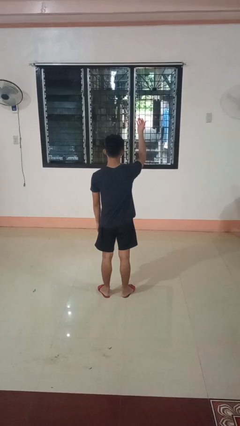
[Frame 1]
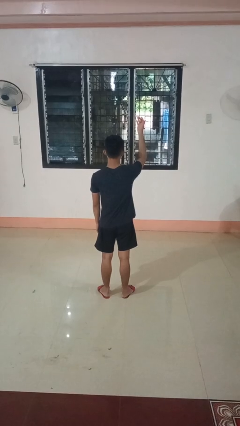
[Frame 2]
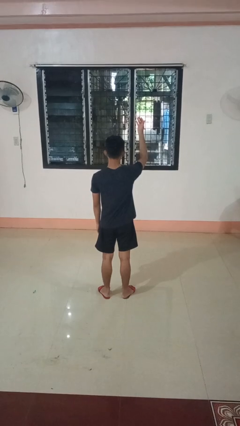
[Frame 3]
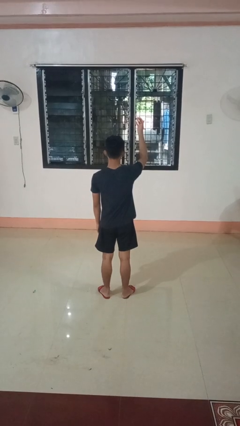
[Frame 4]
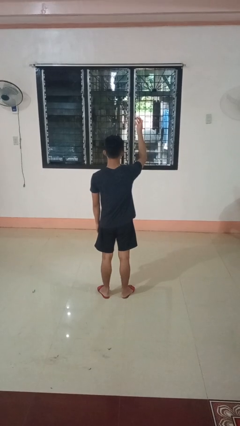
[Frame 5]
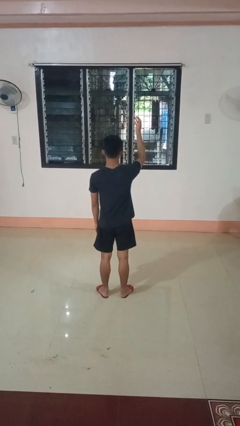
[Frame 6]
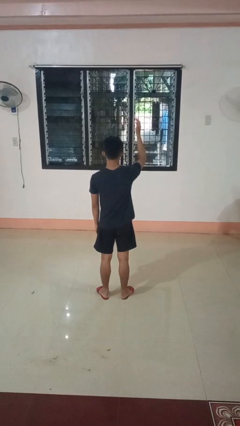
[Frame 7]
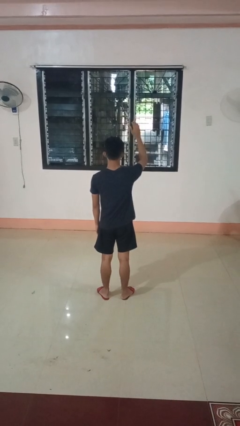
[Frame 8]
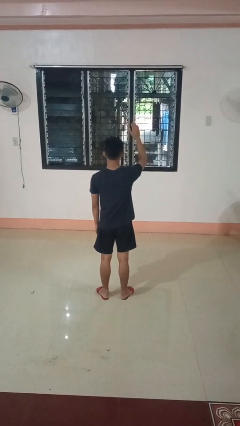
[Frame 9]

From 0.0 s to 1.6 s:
person gestures swipe up

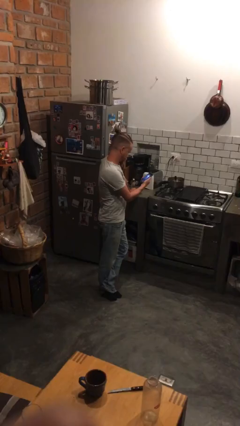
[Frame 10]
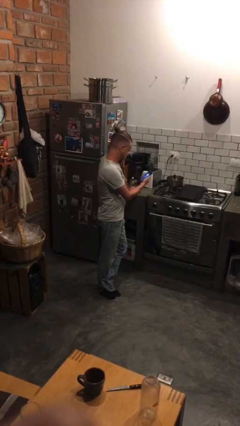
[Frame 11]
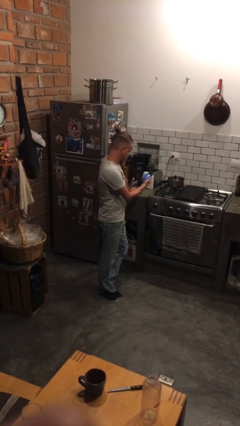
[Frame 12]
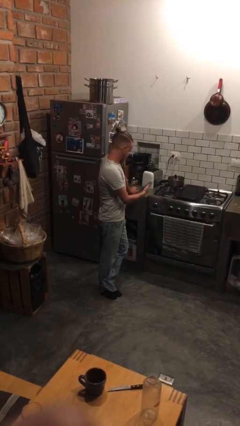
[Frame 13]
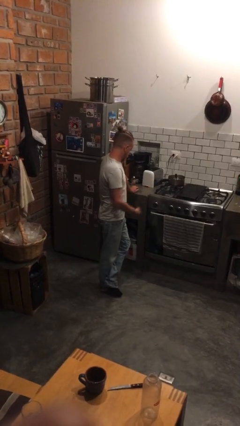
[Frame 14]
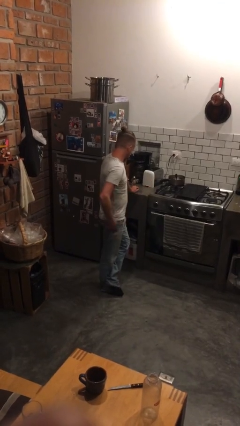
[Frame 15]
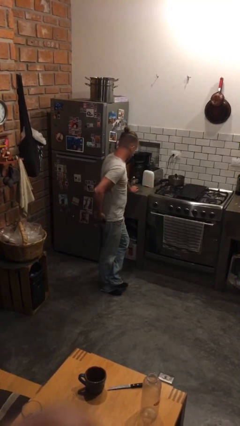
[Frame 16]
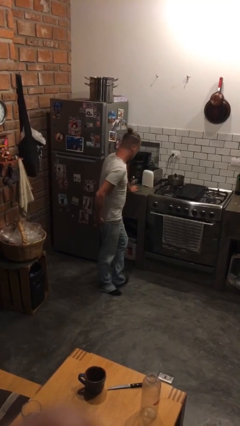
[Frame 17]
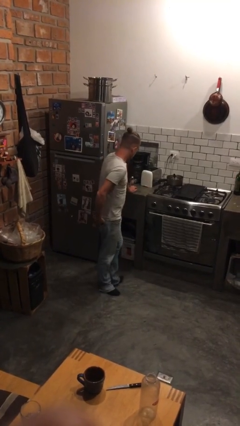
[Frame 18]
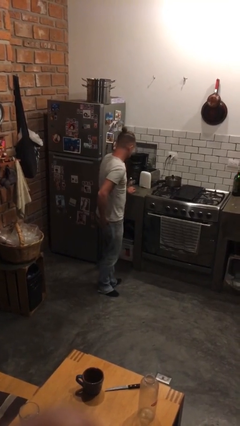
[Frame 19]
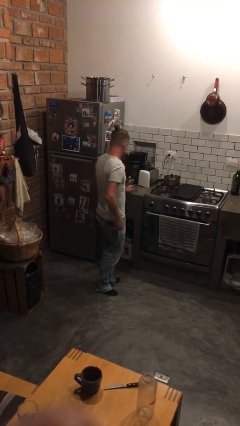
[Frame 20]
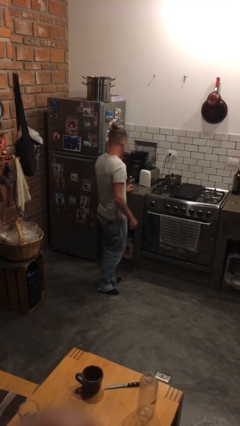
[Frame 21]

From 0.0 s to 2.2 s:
person puts phone into pocket

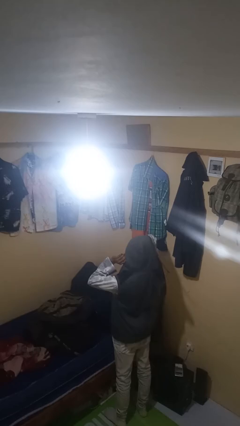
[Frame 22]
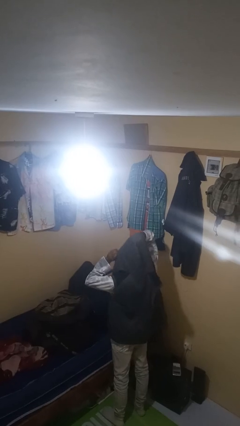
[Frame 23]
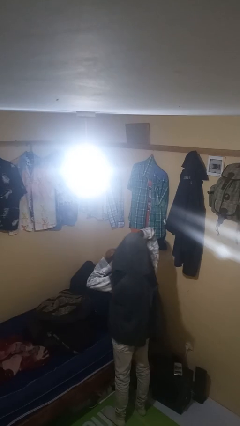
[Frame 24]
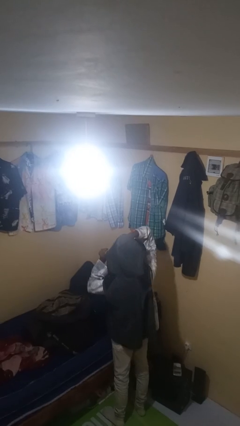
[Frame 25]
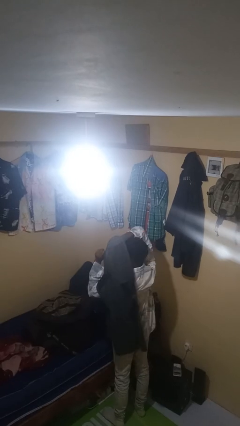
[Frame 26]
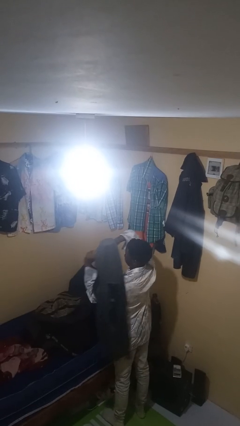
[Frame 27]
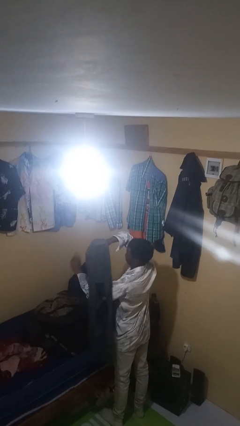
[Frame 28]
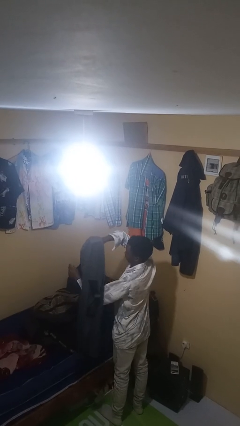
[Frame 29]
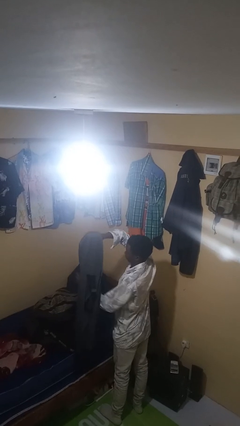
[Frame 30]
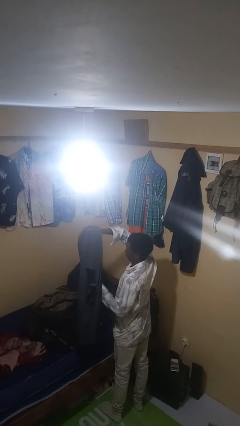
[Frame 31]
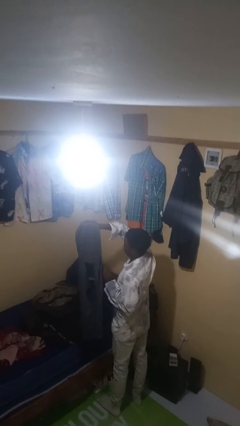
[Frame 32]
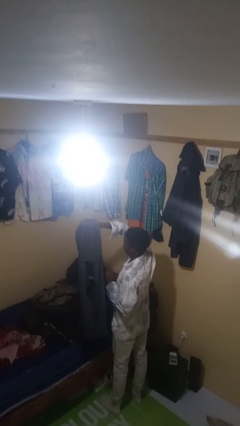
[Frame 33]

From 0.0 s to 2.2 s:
person takes off hoodie

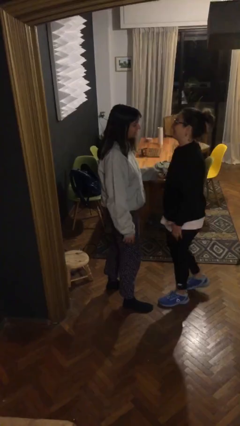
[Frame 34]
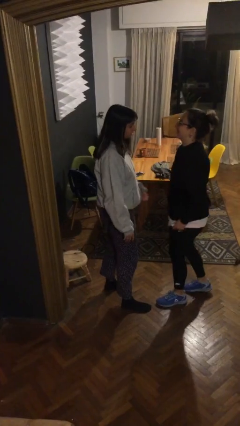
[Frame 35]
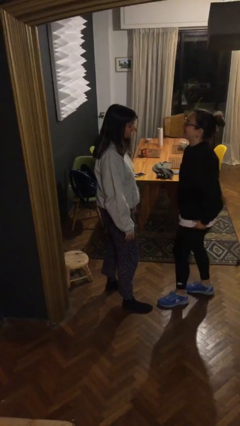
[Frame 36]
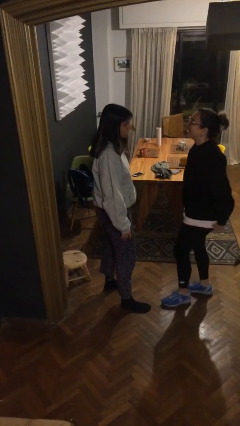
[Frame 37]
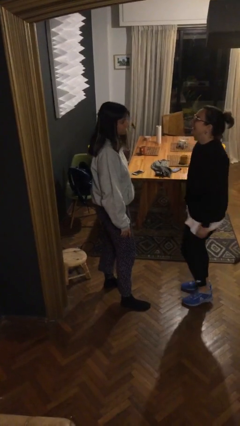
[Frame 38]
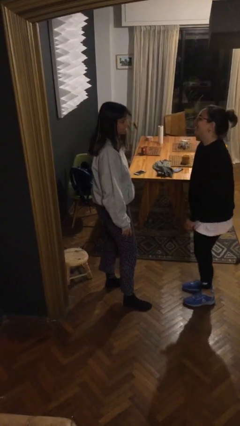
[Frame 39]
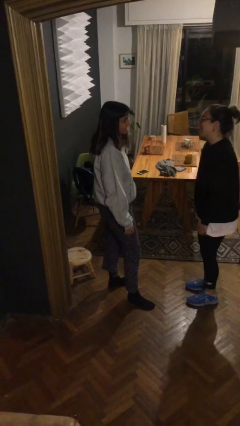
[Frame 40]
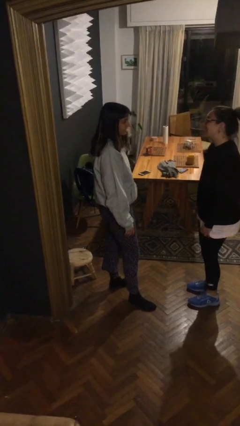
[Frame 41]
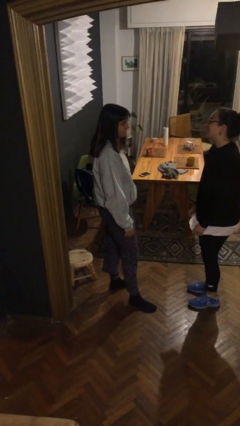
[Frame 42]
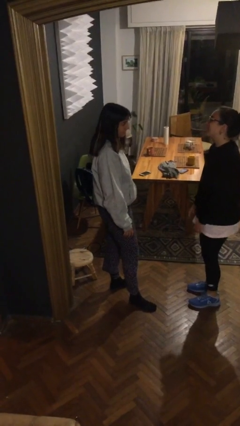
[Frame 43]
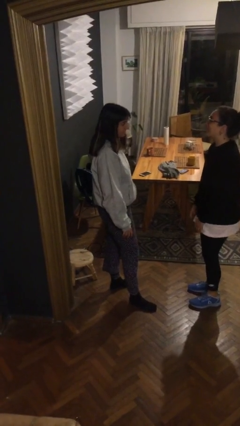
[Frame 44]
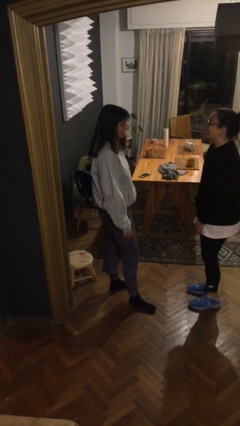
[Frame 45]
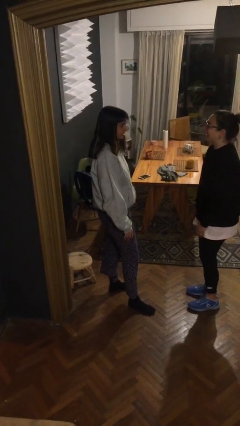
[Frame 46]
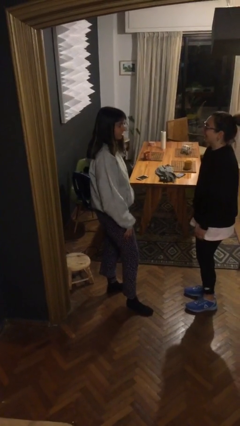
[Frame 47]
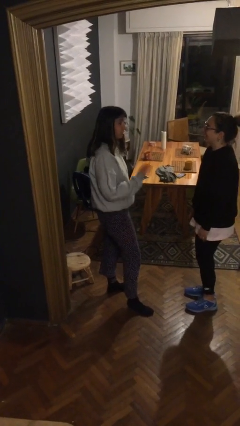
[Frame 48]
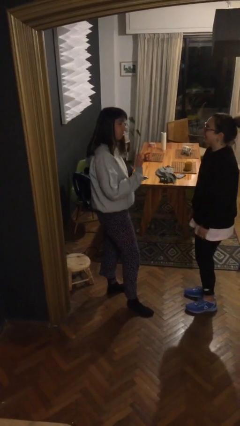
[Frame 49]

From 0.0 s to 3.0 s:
person talks to person

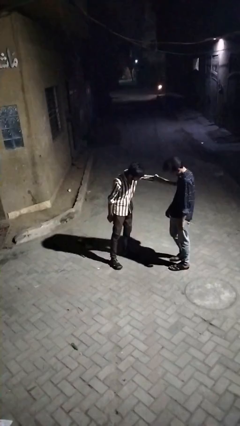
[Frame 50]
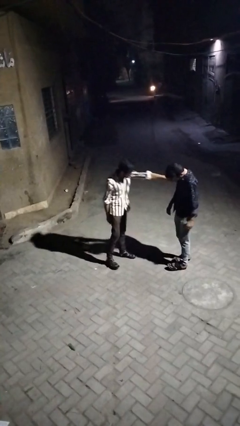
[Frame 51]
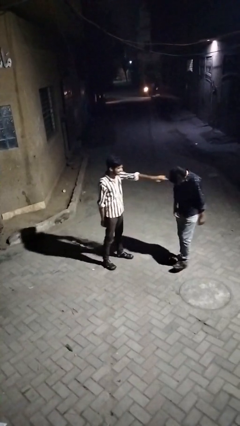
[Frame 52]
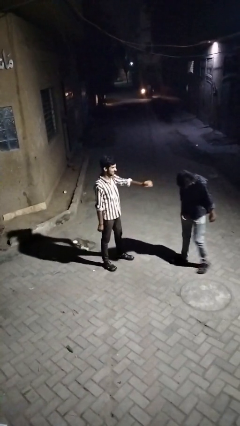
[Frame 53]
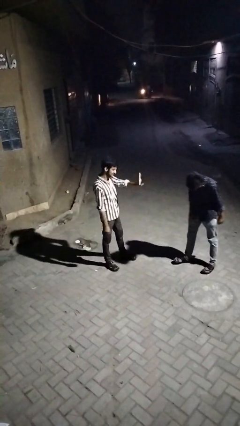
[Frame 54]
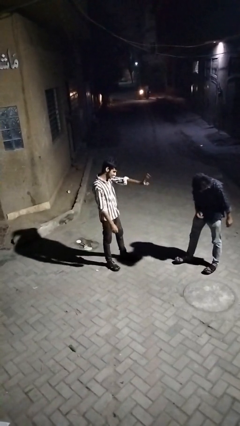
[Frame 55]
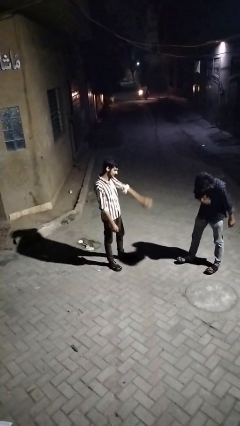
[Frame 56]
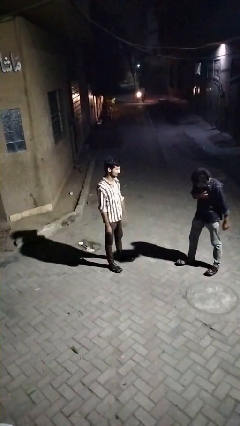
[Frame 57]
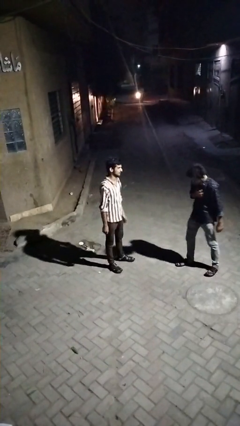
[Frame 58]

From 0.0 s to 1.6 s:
person shoves person

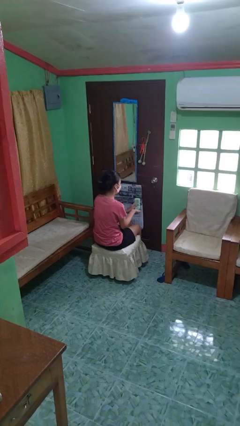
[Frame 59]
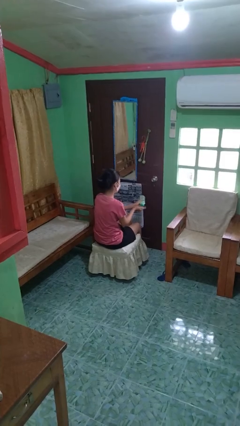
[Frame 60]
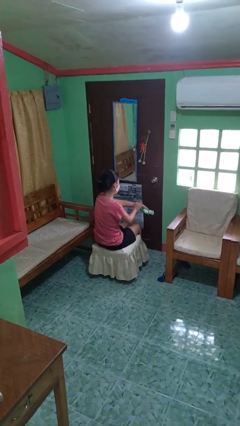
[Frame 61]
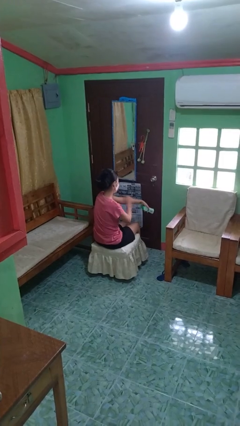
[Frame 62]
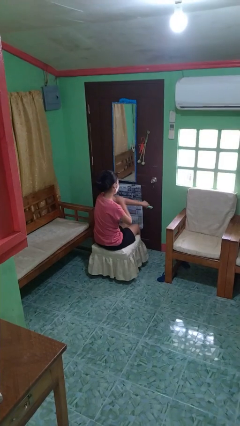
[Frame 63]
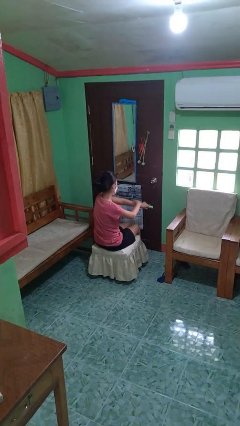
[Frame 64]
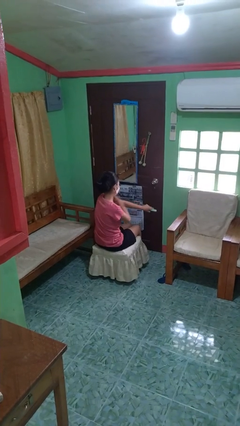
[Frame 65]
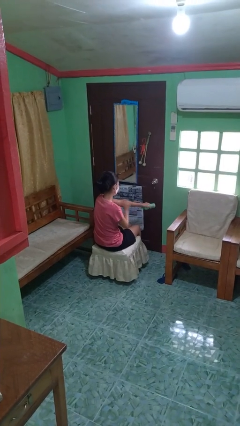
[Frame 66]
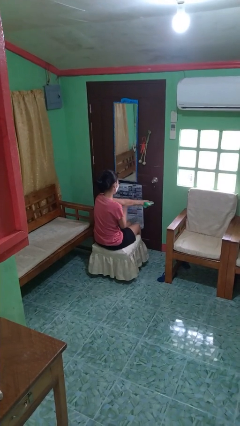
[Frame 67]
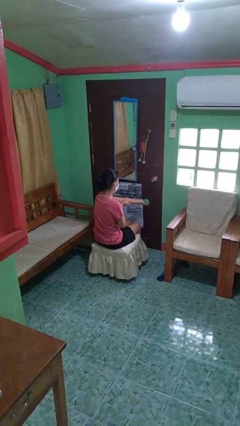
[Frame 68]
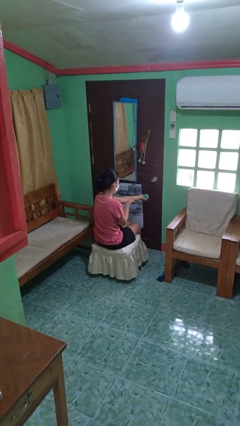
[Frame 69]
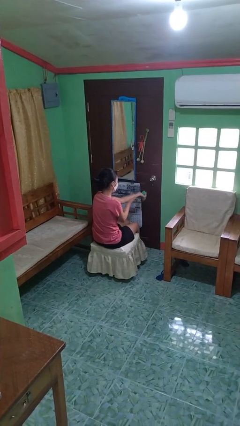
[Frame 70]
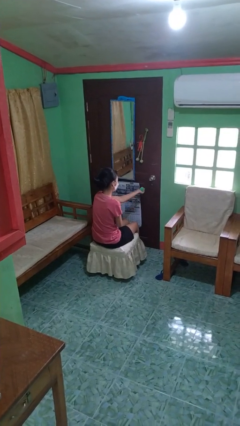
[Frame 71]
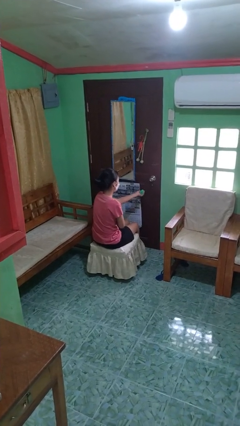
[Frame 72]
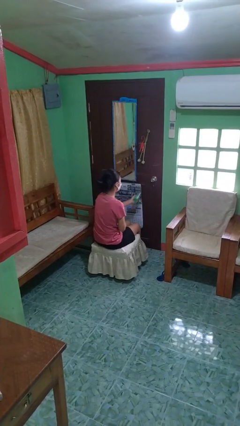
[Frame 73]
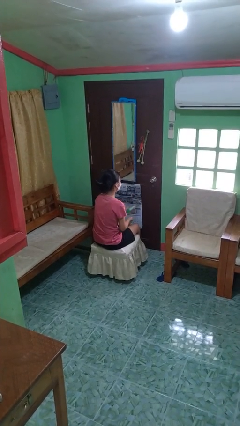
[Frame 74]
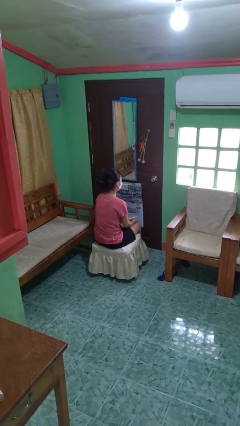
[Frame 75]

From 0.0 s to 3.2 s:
person applies sunscreen

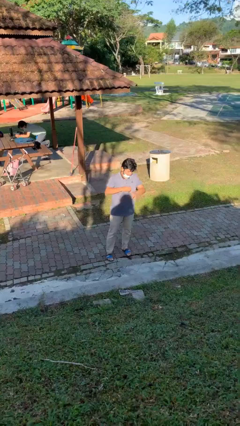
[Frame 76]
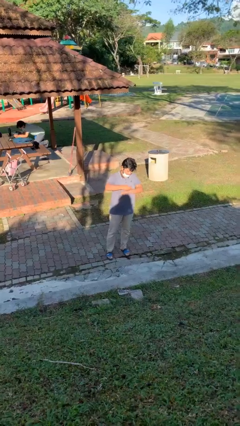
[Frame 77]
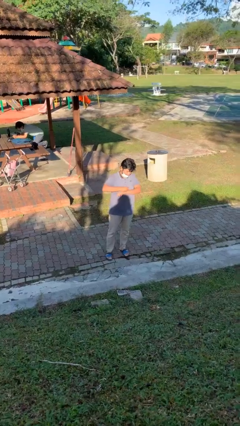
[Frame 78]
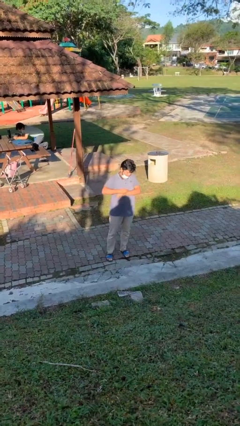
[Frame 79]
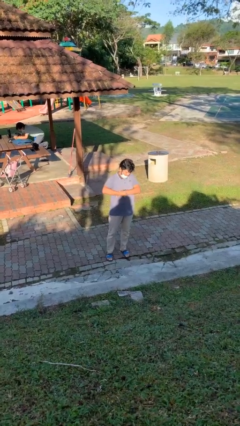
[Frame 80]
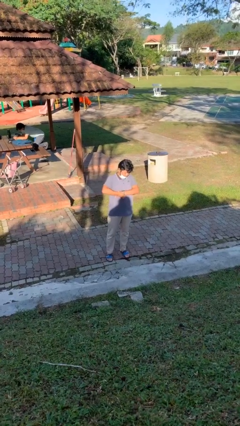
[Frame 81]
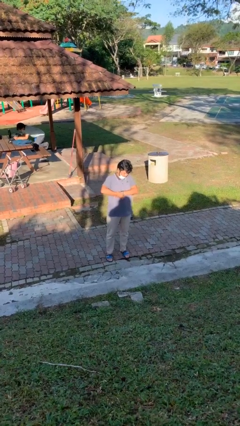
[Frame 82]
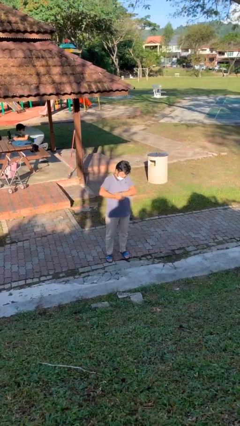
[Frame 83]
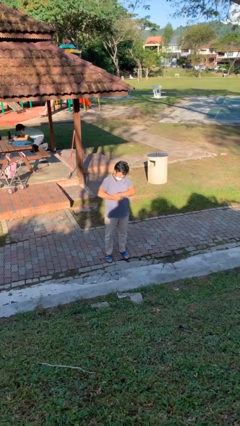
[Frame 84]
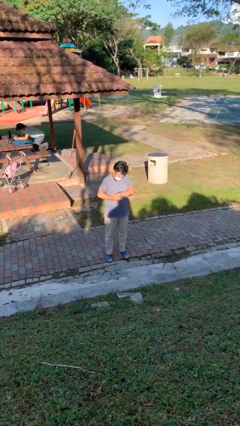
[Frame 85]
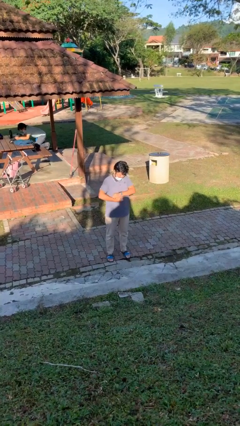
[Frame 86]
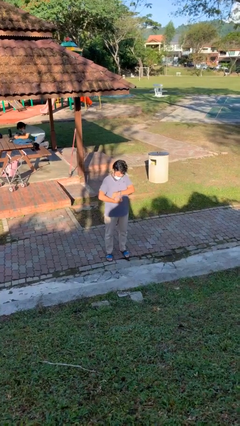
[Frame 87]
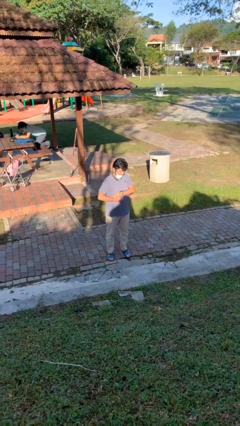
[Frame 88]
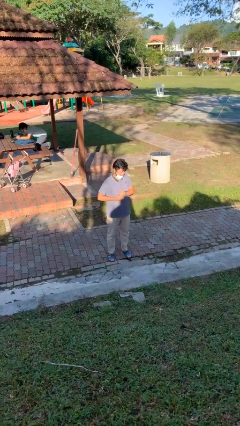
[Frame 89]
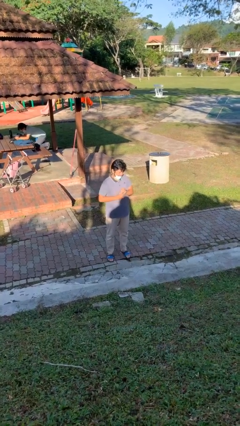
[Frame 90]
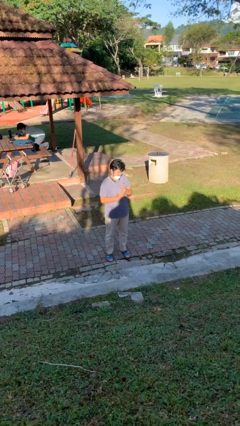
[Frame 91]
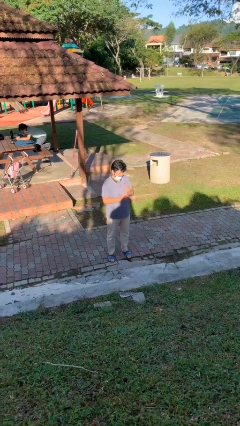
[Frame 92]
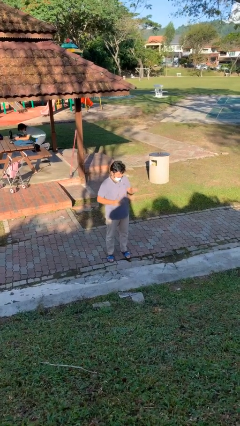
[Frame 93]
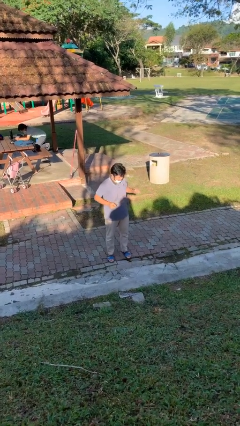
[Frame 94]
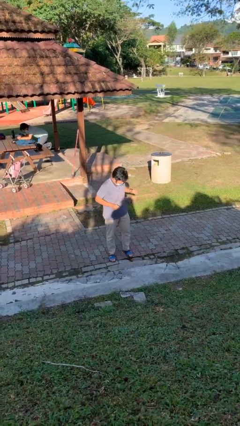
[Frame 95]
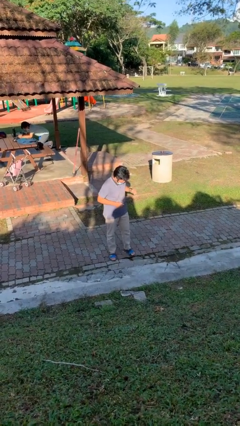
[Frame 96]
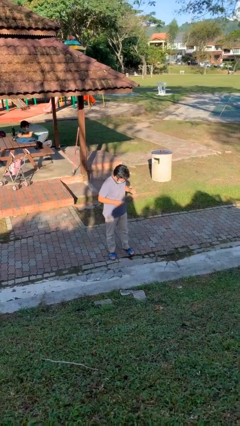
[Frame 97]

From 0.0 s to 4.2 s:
person puts on wristwatch
